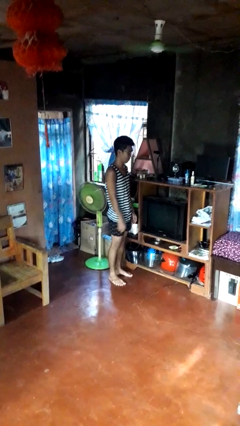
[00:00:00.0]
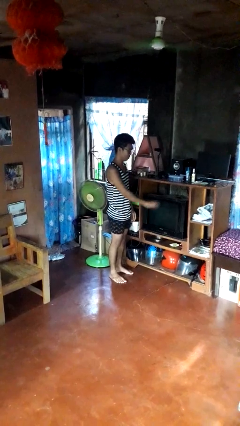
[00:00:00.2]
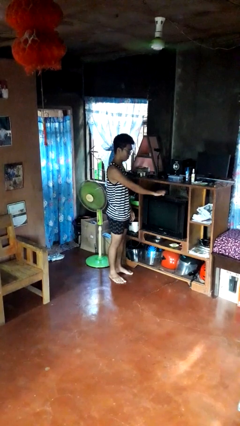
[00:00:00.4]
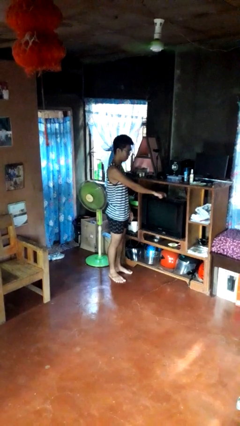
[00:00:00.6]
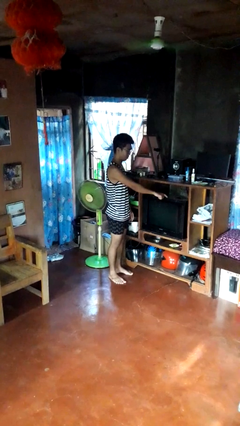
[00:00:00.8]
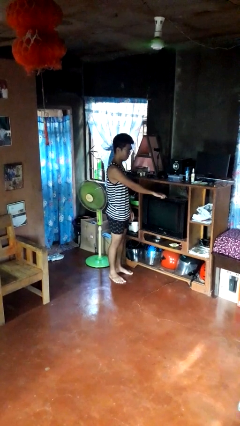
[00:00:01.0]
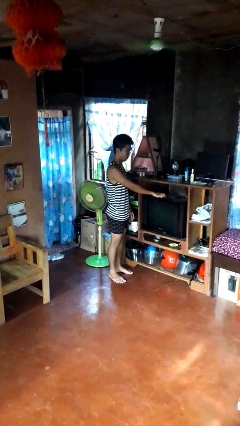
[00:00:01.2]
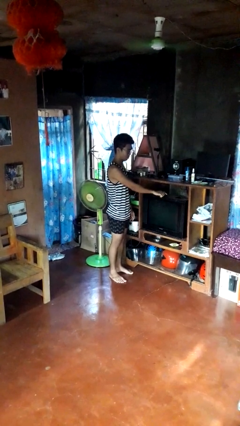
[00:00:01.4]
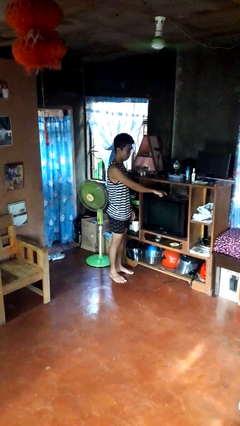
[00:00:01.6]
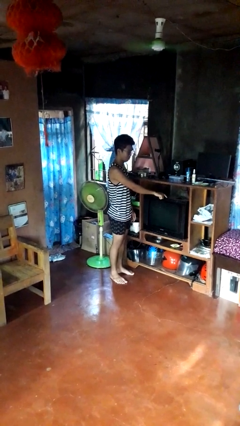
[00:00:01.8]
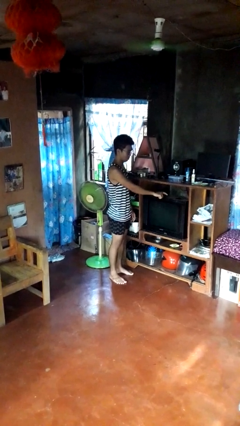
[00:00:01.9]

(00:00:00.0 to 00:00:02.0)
person taps object with finger

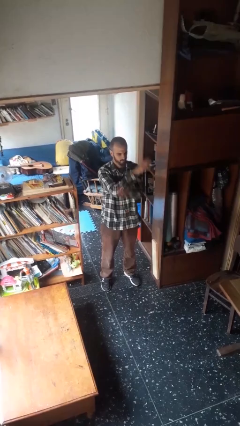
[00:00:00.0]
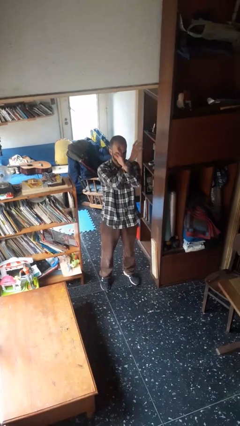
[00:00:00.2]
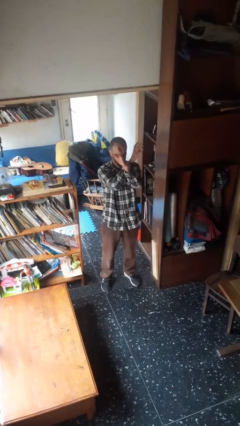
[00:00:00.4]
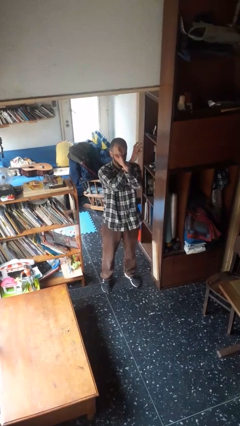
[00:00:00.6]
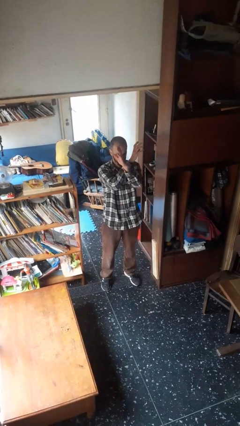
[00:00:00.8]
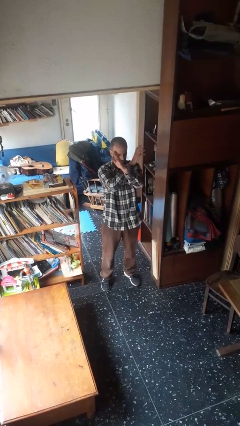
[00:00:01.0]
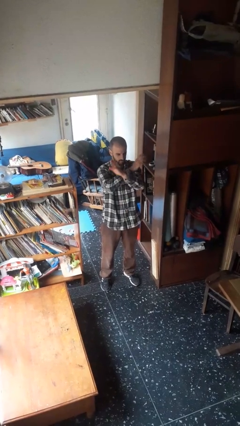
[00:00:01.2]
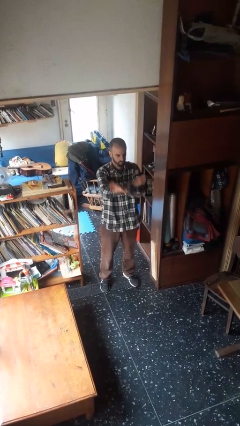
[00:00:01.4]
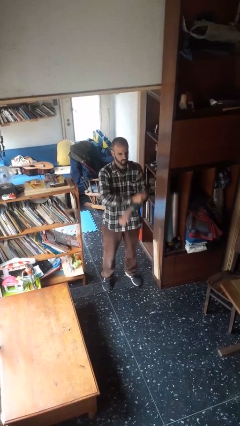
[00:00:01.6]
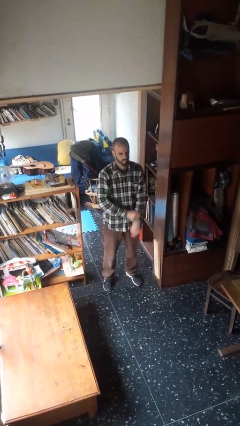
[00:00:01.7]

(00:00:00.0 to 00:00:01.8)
person gestures arms x

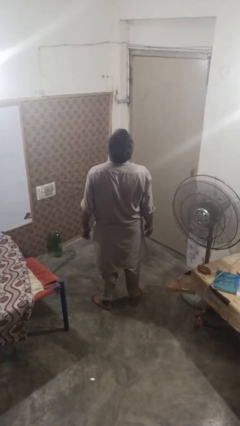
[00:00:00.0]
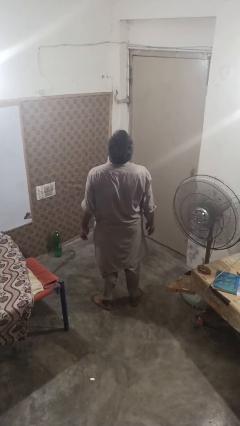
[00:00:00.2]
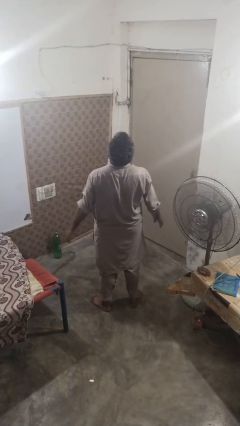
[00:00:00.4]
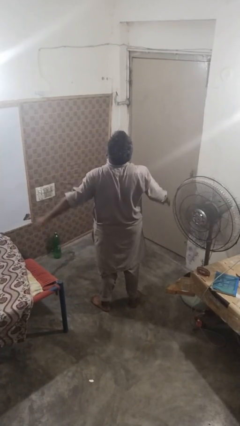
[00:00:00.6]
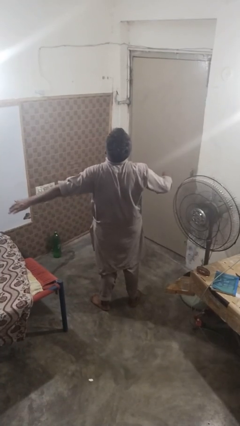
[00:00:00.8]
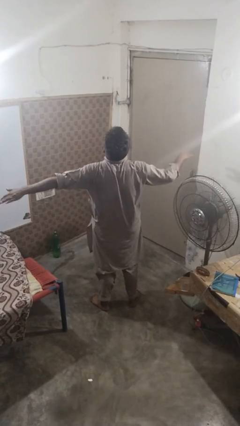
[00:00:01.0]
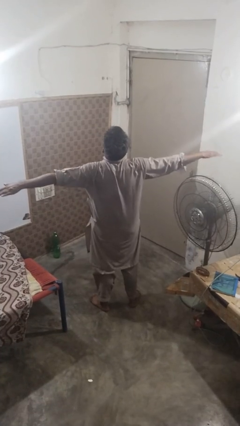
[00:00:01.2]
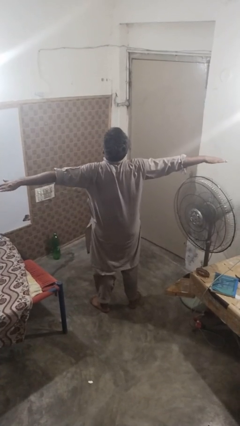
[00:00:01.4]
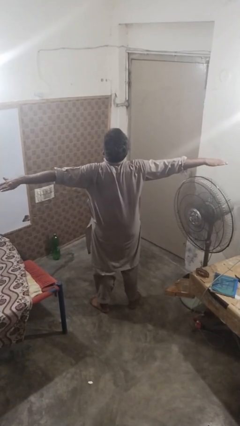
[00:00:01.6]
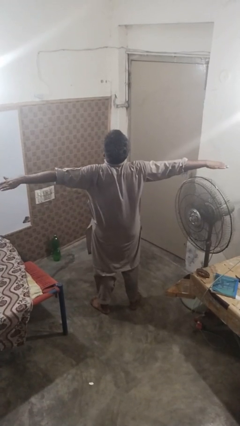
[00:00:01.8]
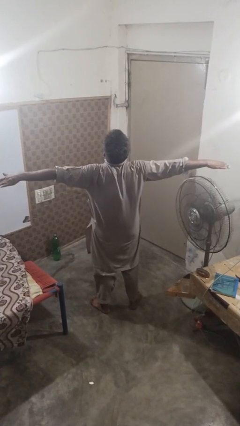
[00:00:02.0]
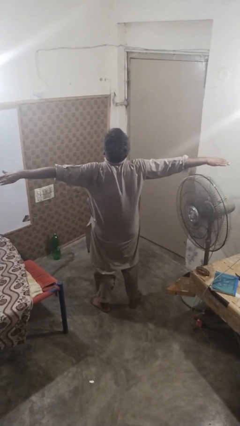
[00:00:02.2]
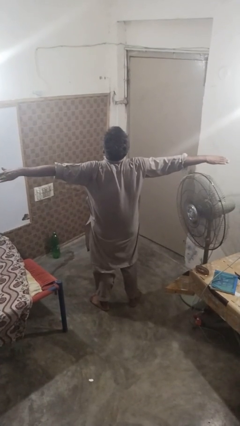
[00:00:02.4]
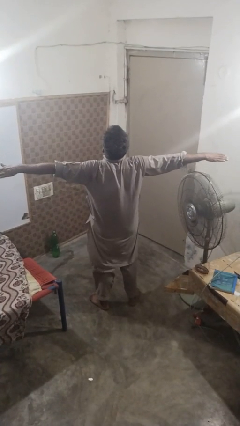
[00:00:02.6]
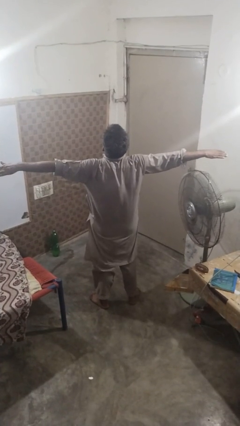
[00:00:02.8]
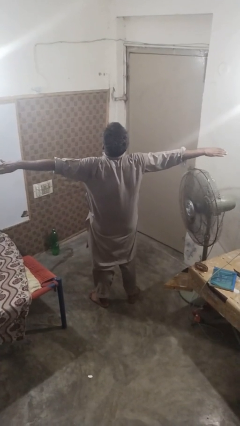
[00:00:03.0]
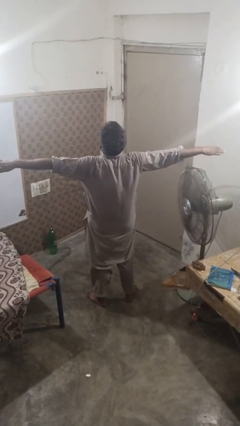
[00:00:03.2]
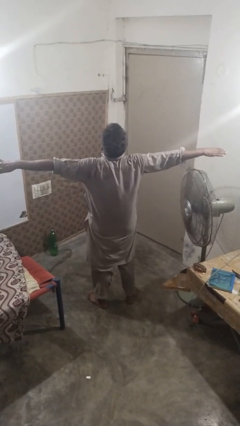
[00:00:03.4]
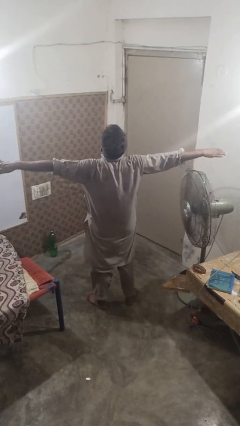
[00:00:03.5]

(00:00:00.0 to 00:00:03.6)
person stretches arms to side

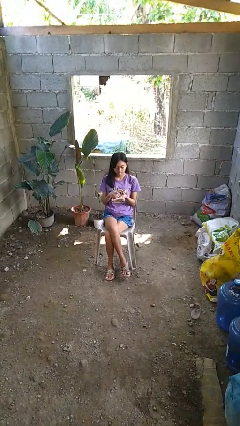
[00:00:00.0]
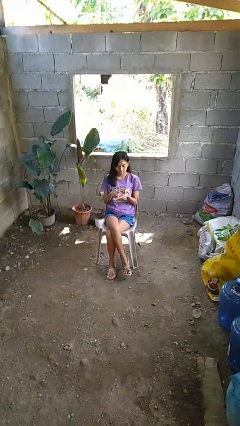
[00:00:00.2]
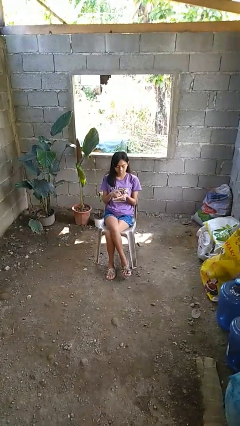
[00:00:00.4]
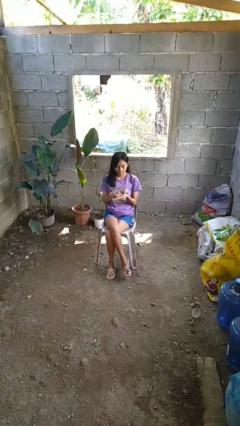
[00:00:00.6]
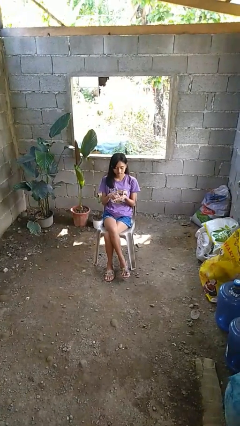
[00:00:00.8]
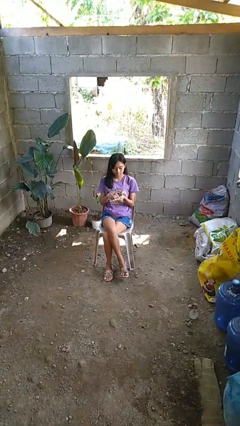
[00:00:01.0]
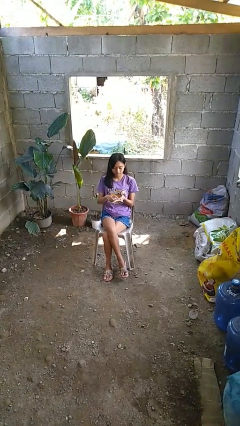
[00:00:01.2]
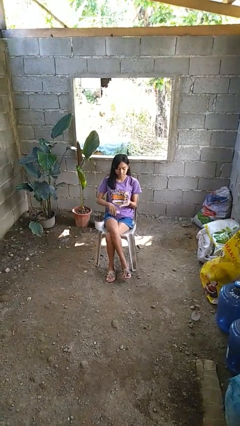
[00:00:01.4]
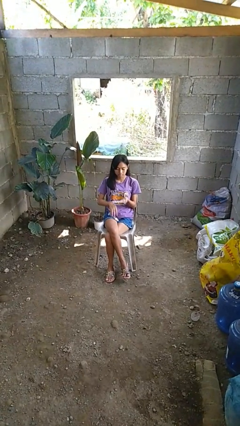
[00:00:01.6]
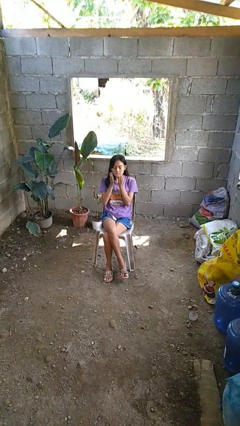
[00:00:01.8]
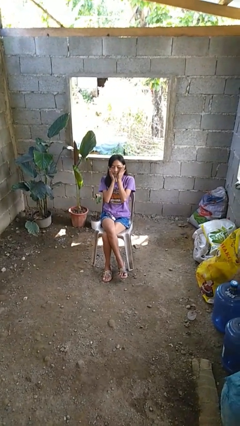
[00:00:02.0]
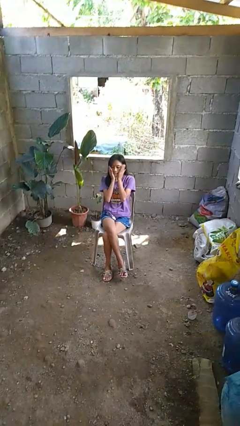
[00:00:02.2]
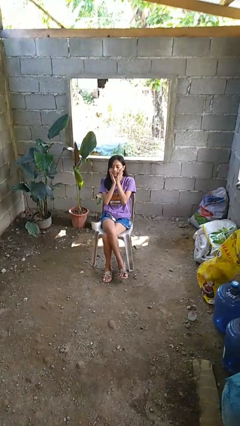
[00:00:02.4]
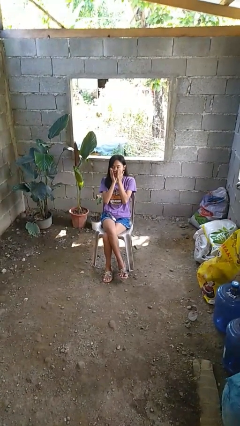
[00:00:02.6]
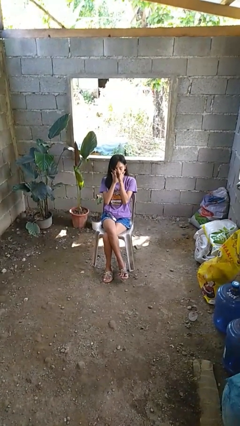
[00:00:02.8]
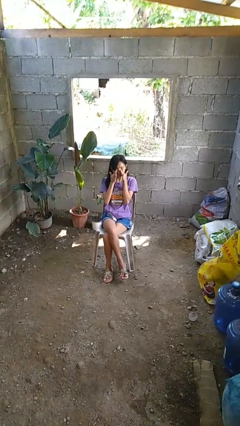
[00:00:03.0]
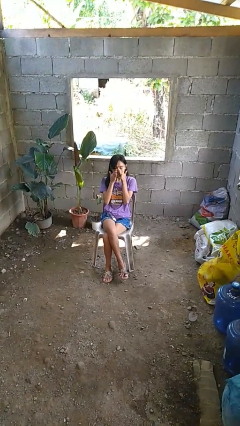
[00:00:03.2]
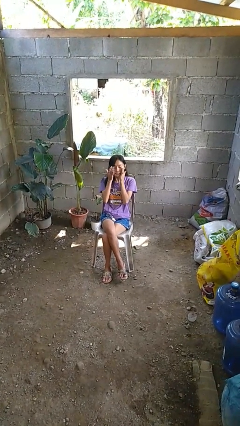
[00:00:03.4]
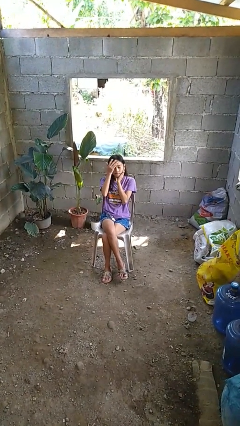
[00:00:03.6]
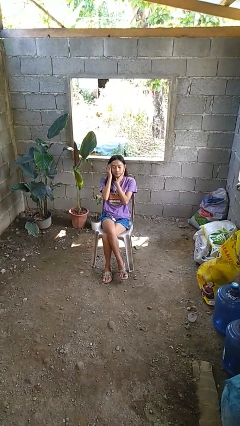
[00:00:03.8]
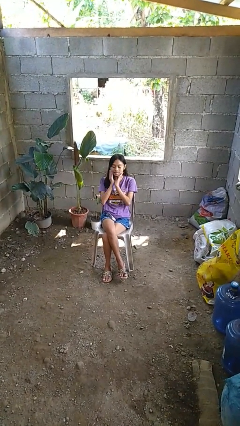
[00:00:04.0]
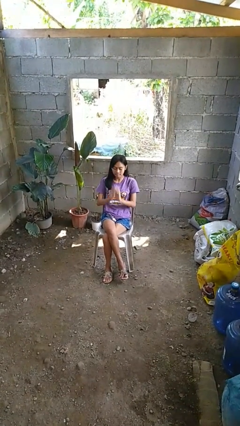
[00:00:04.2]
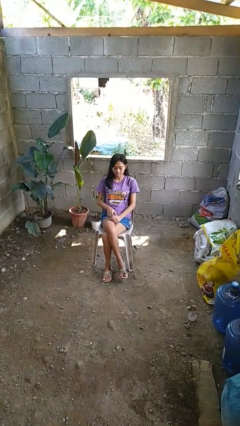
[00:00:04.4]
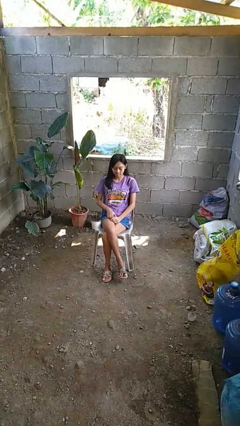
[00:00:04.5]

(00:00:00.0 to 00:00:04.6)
person applies facial moisturizer

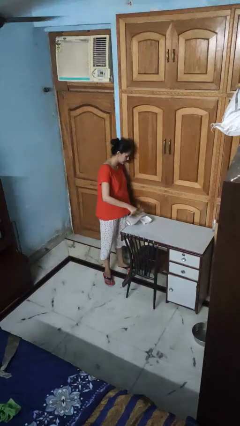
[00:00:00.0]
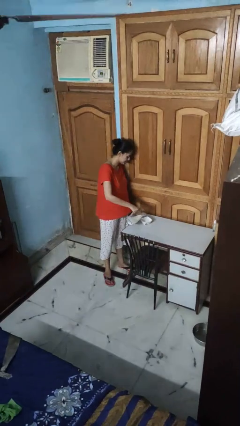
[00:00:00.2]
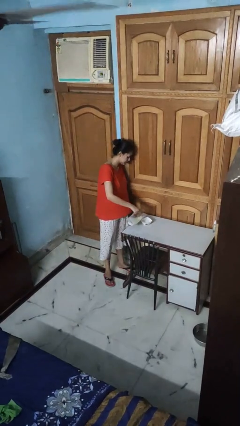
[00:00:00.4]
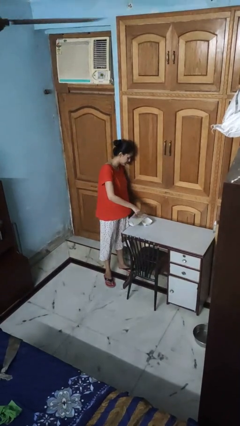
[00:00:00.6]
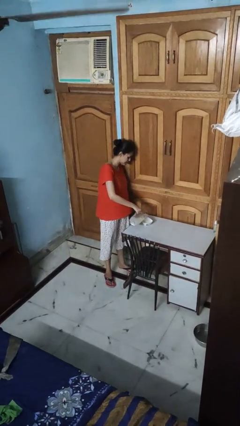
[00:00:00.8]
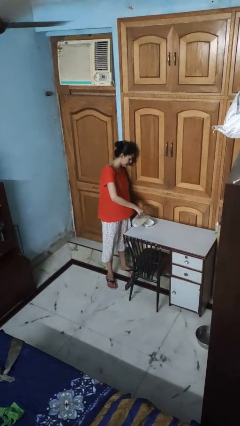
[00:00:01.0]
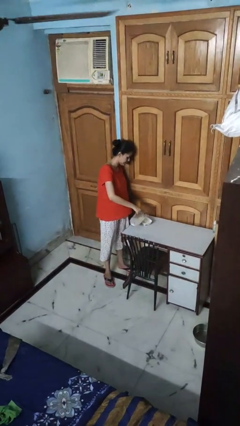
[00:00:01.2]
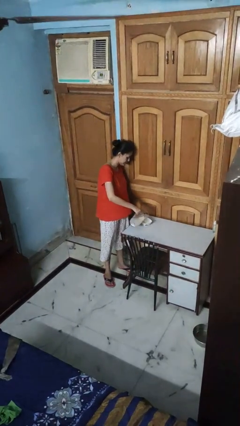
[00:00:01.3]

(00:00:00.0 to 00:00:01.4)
person pours into bowl

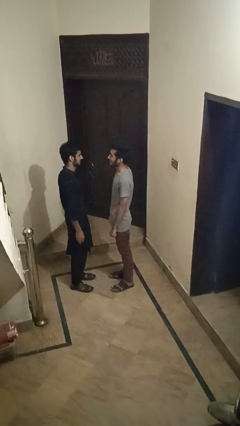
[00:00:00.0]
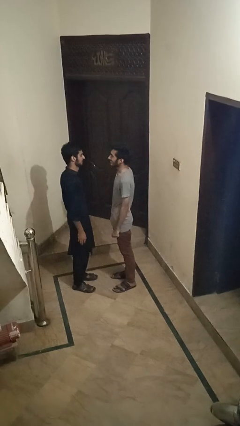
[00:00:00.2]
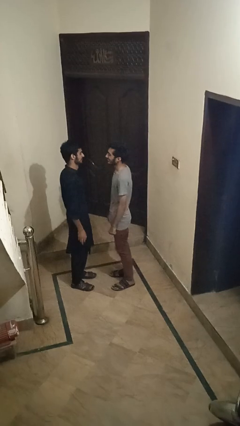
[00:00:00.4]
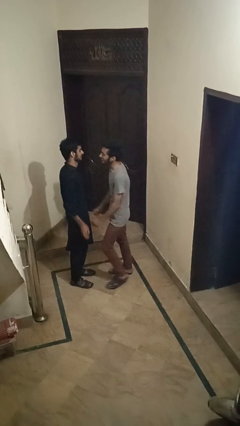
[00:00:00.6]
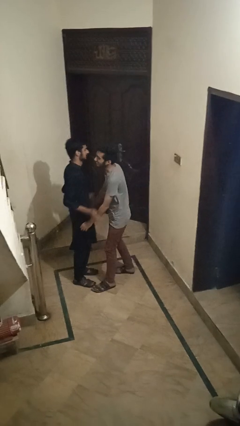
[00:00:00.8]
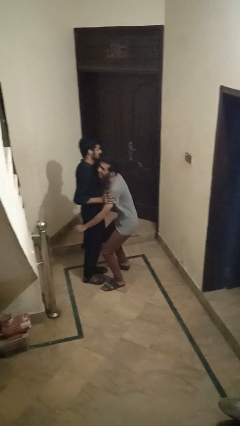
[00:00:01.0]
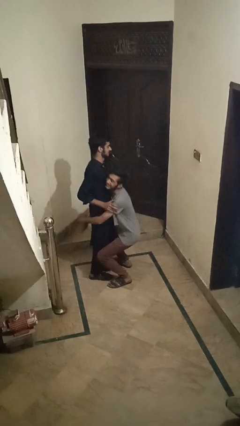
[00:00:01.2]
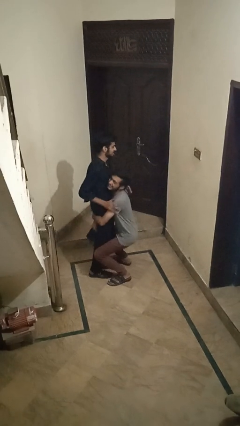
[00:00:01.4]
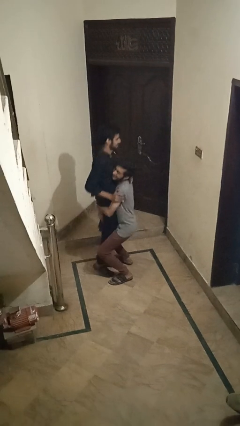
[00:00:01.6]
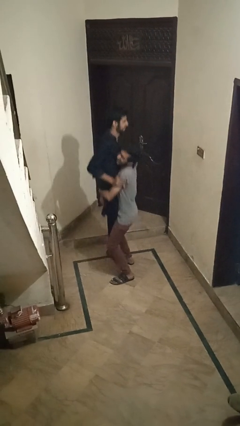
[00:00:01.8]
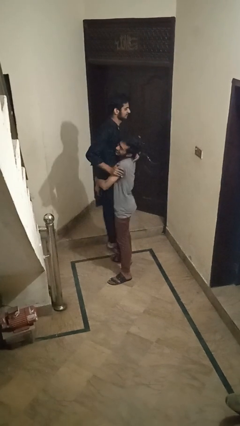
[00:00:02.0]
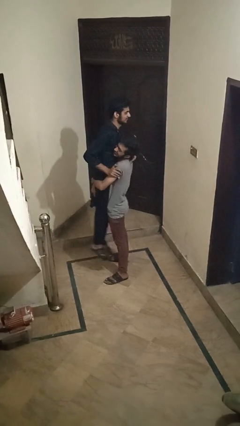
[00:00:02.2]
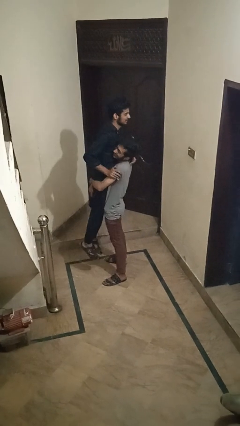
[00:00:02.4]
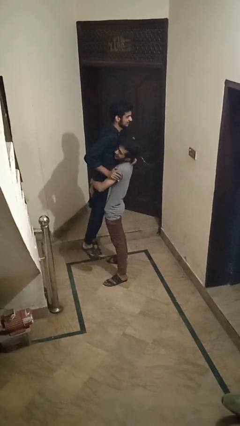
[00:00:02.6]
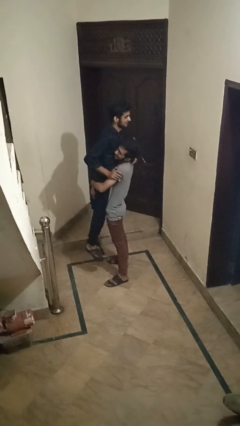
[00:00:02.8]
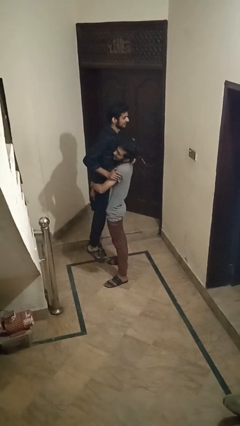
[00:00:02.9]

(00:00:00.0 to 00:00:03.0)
person picks up person

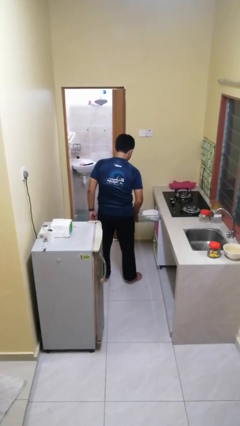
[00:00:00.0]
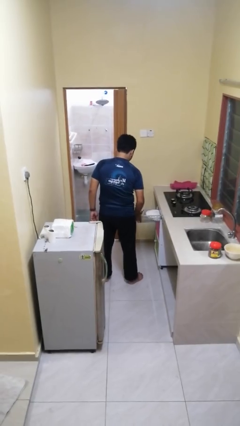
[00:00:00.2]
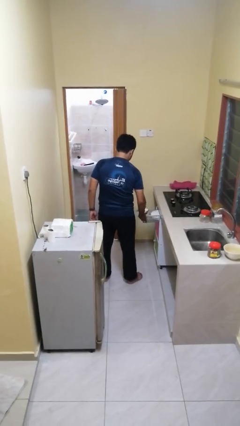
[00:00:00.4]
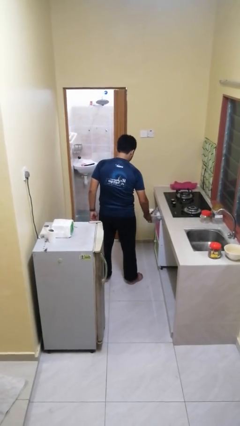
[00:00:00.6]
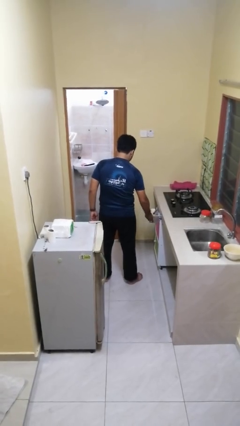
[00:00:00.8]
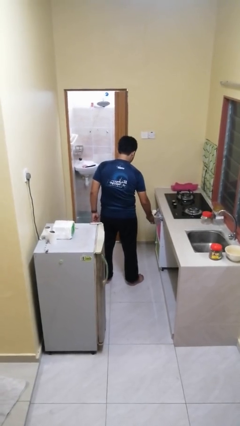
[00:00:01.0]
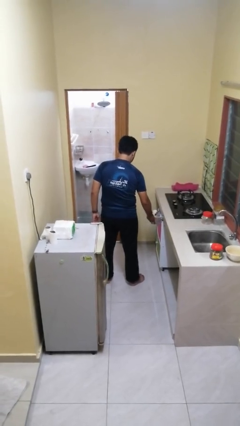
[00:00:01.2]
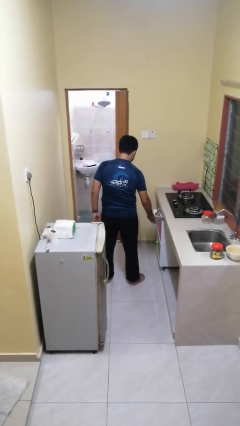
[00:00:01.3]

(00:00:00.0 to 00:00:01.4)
person closes kitchen drawer
